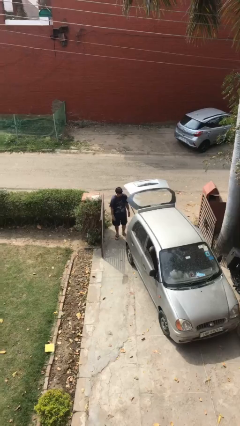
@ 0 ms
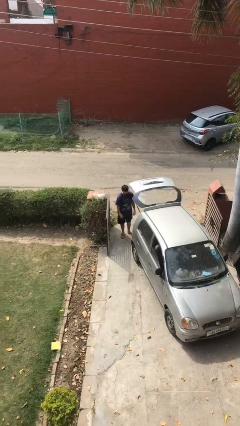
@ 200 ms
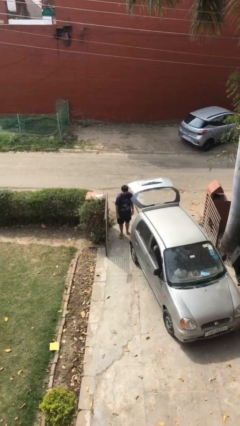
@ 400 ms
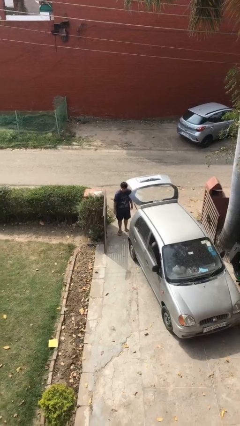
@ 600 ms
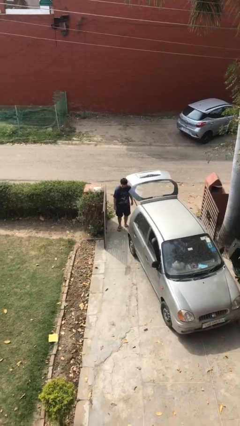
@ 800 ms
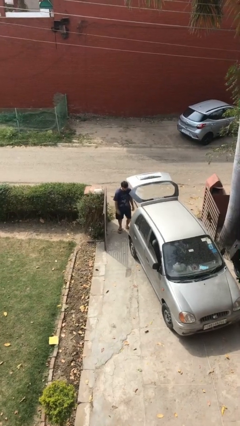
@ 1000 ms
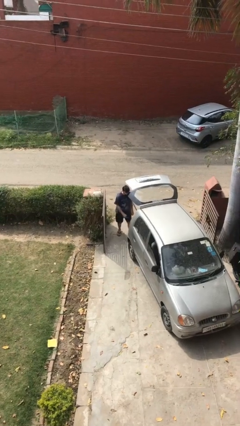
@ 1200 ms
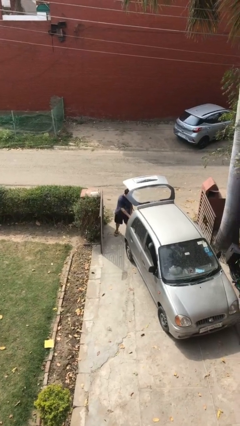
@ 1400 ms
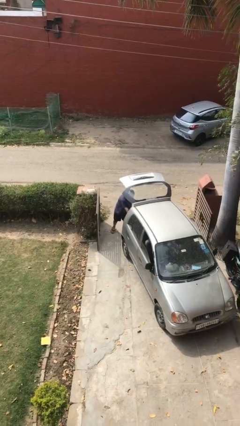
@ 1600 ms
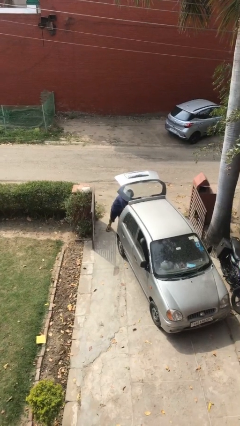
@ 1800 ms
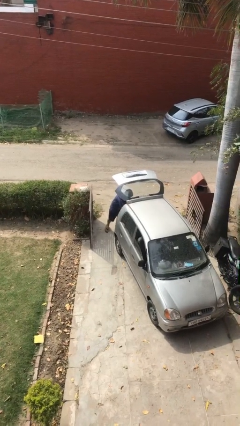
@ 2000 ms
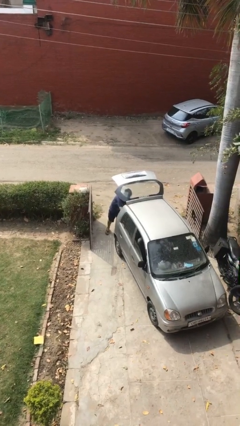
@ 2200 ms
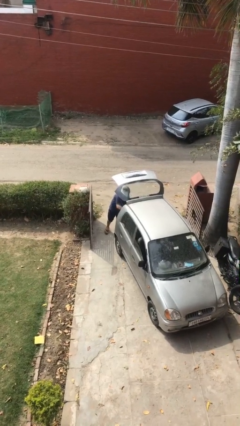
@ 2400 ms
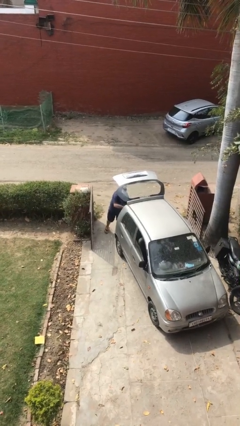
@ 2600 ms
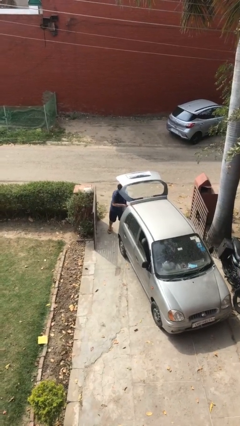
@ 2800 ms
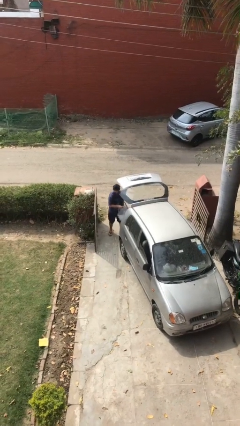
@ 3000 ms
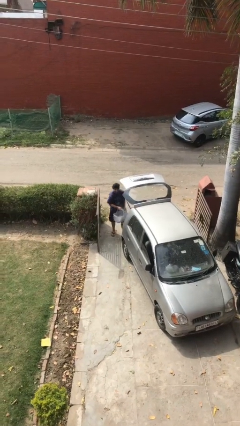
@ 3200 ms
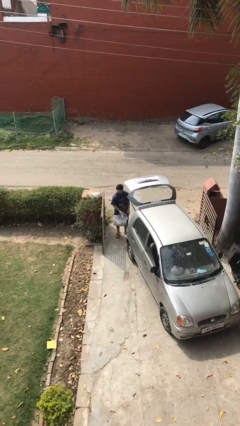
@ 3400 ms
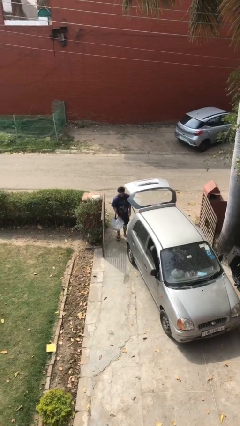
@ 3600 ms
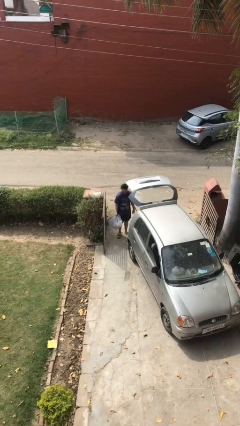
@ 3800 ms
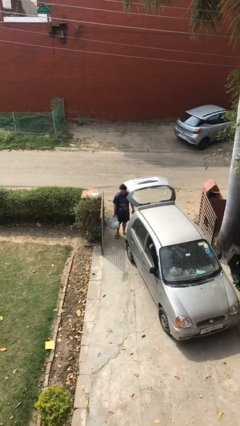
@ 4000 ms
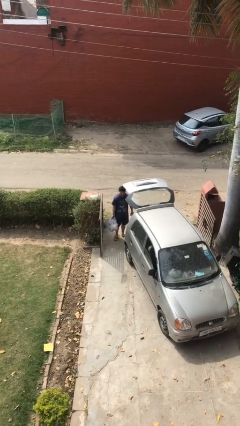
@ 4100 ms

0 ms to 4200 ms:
person unloads car

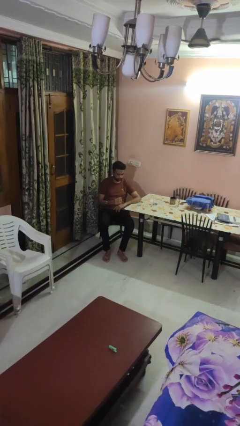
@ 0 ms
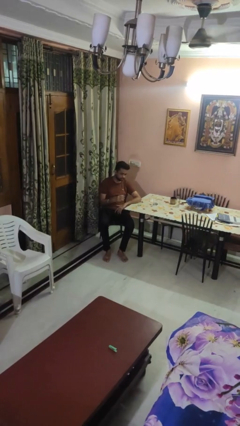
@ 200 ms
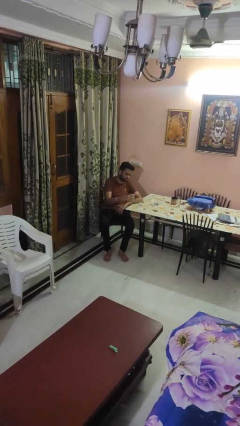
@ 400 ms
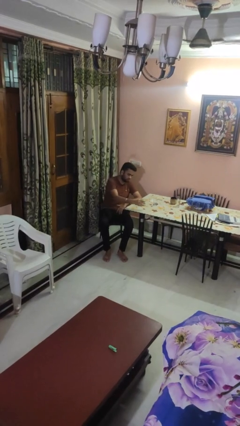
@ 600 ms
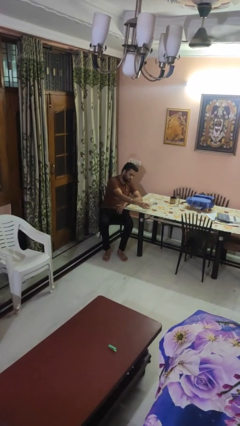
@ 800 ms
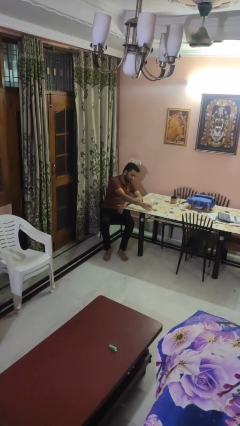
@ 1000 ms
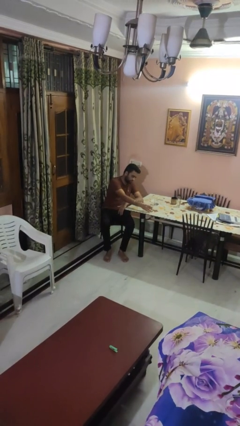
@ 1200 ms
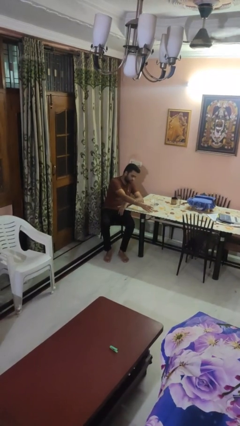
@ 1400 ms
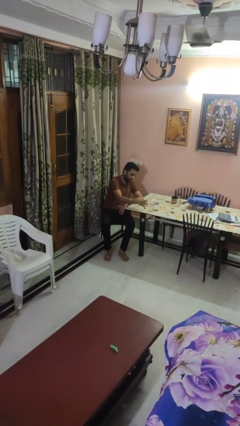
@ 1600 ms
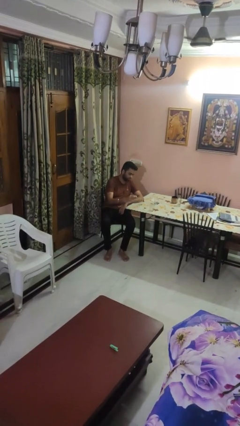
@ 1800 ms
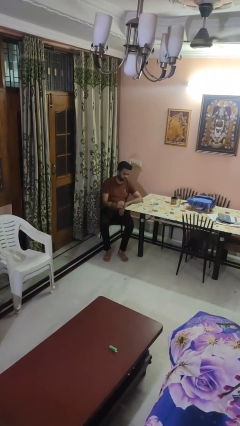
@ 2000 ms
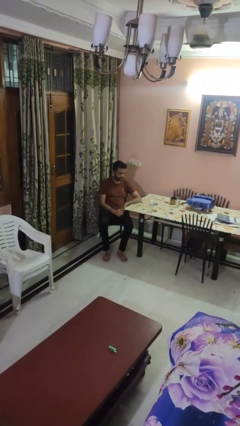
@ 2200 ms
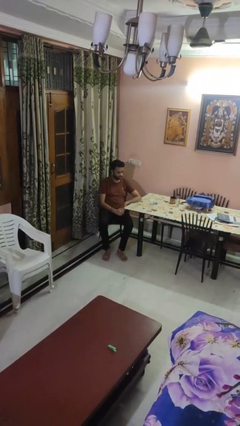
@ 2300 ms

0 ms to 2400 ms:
person puts down object on table

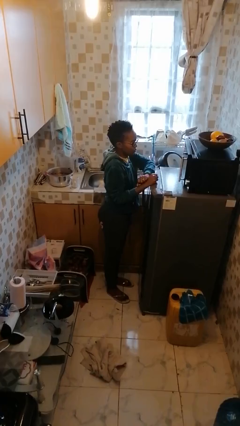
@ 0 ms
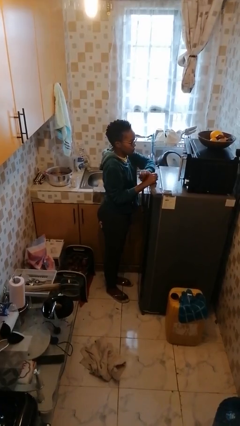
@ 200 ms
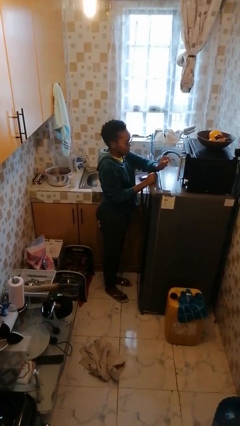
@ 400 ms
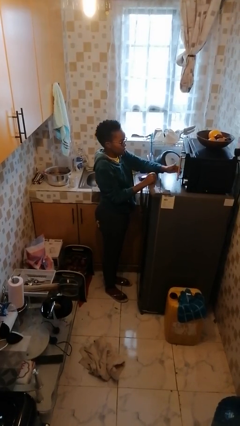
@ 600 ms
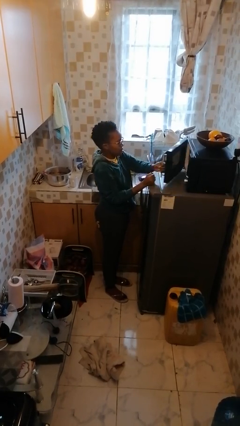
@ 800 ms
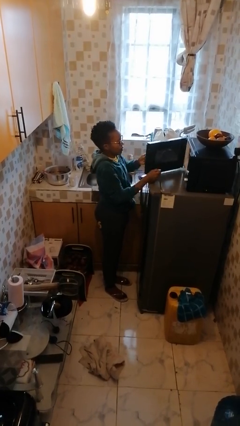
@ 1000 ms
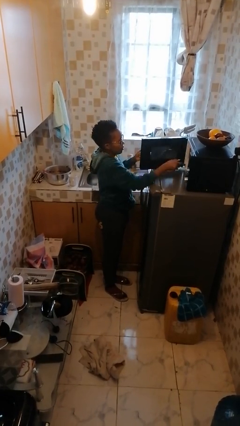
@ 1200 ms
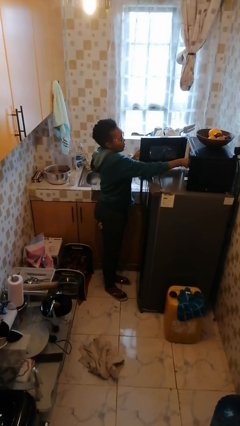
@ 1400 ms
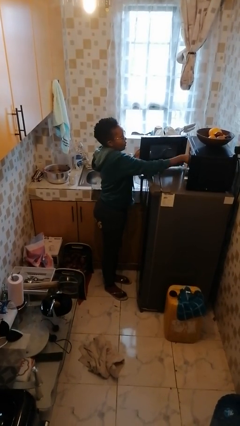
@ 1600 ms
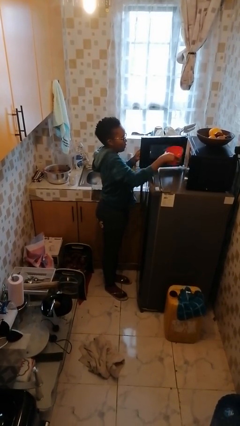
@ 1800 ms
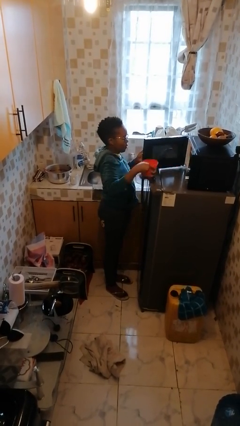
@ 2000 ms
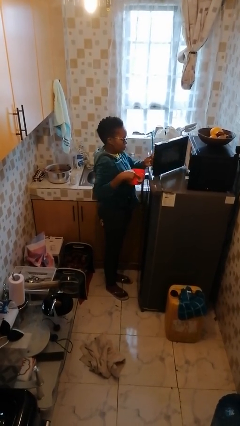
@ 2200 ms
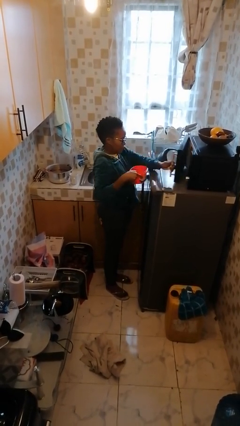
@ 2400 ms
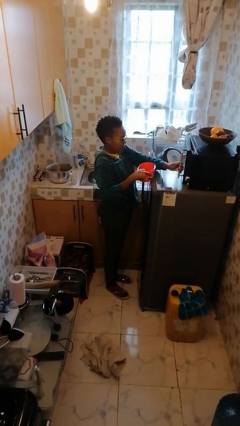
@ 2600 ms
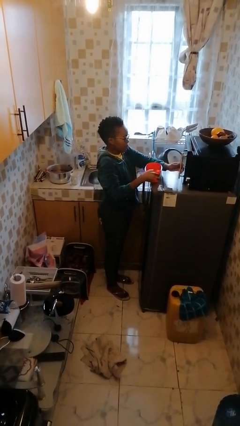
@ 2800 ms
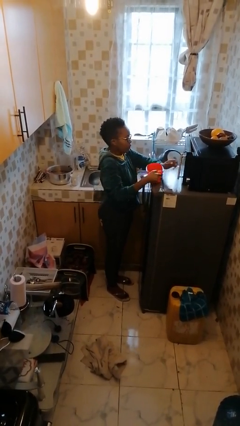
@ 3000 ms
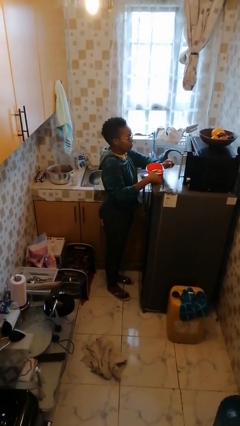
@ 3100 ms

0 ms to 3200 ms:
person takes object from microwave

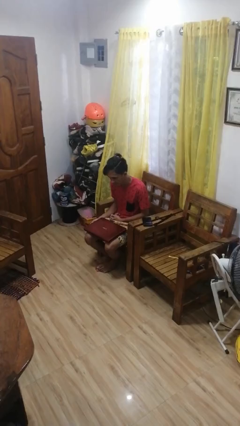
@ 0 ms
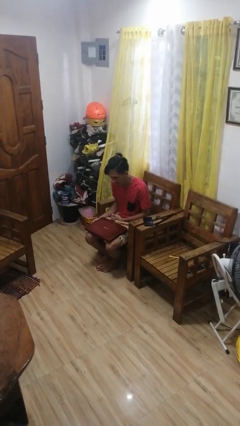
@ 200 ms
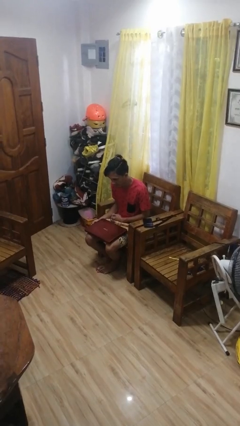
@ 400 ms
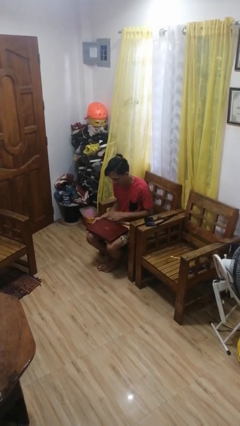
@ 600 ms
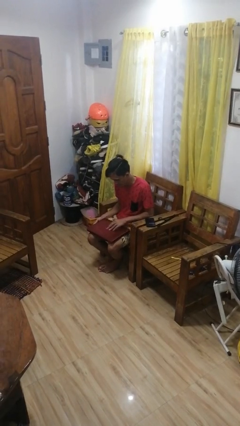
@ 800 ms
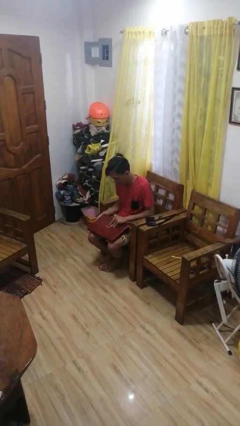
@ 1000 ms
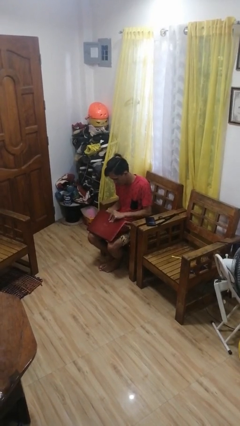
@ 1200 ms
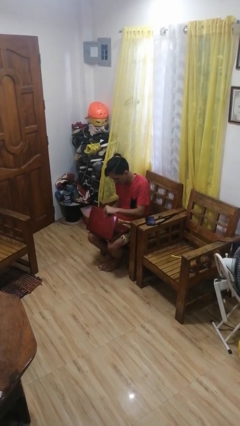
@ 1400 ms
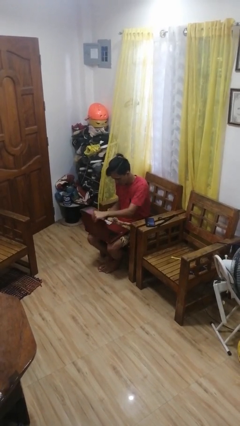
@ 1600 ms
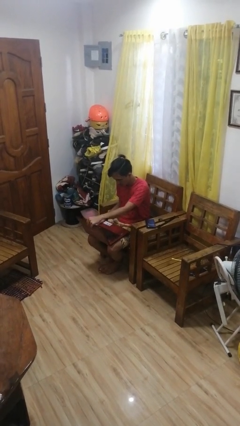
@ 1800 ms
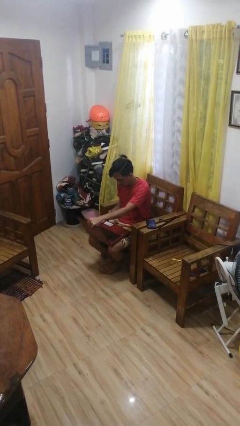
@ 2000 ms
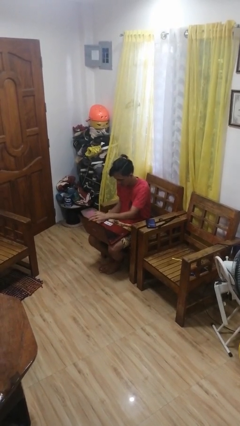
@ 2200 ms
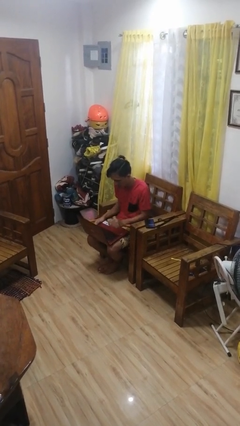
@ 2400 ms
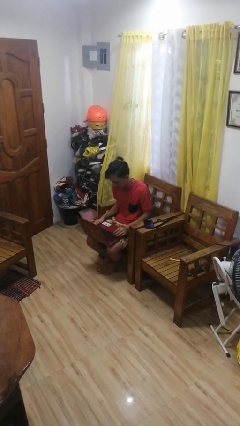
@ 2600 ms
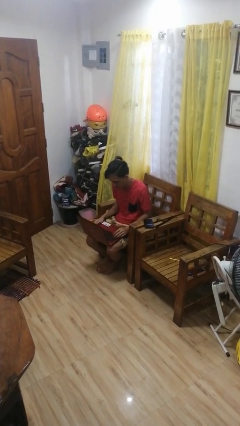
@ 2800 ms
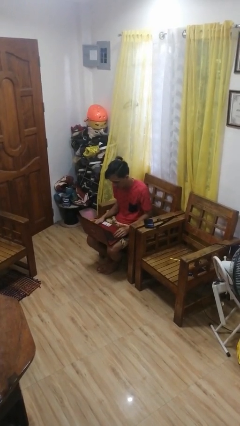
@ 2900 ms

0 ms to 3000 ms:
person opens laptop

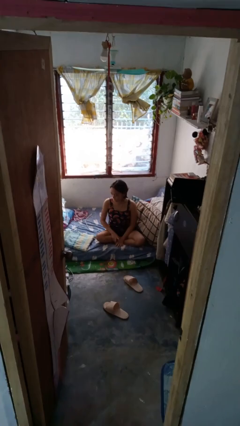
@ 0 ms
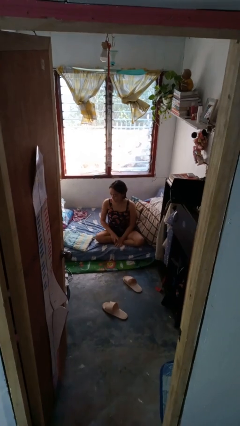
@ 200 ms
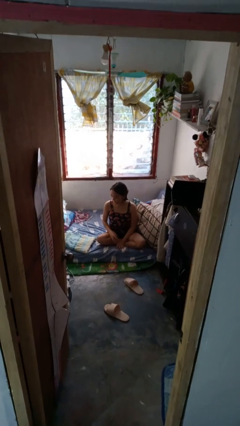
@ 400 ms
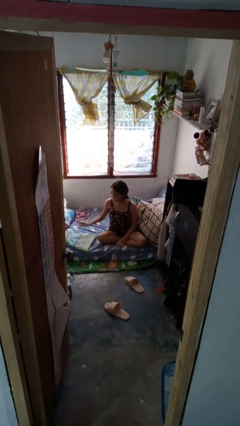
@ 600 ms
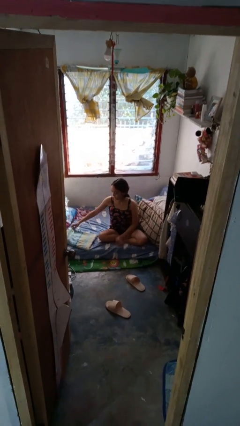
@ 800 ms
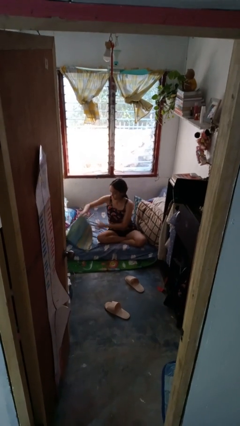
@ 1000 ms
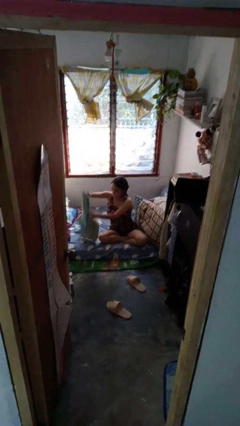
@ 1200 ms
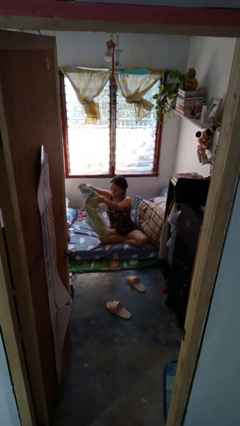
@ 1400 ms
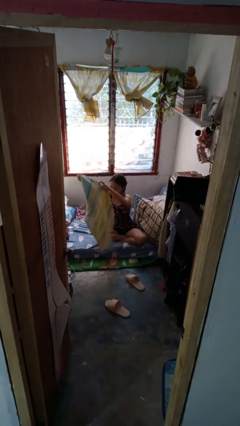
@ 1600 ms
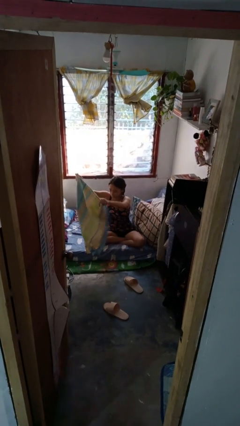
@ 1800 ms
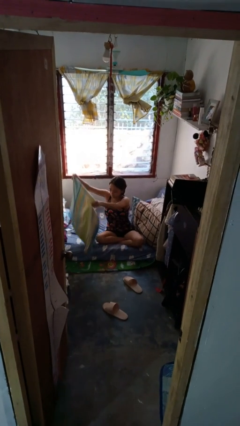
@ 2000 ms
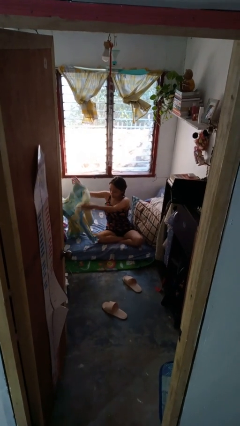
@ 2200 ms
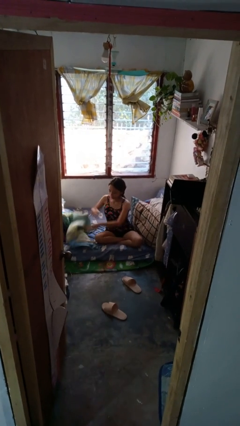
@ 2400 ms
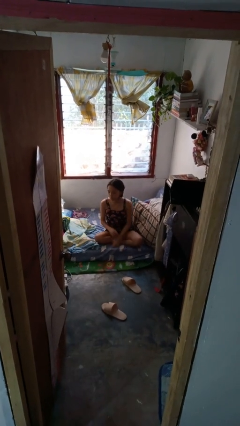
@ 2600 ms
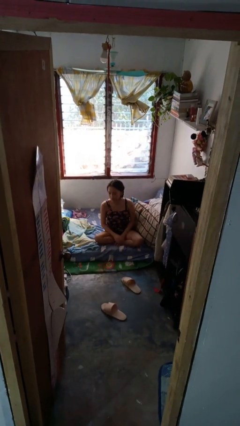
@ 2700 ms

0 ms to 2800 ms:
person unfolds blanket

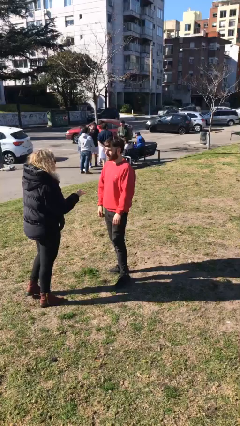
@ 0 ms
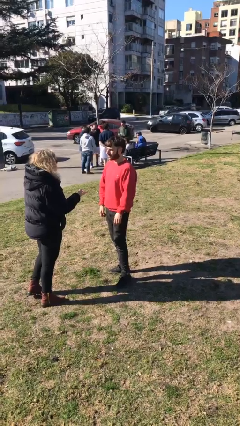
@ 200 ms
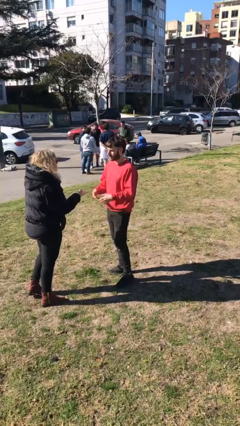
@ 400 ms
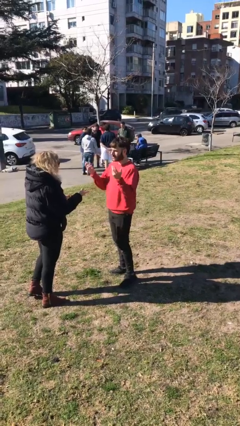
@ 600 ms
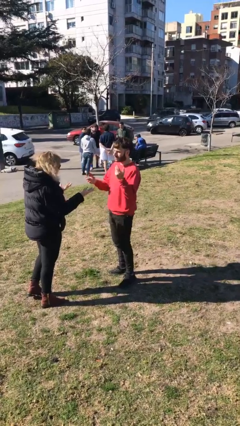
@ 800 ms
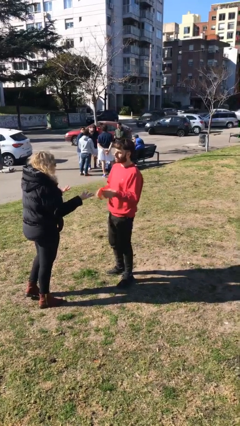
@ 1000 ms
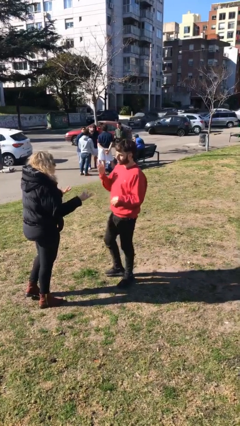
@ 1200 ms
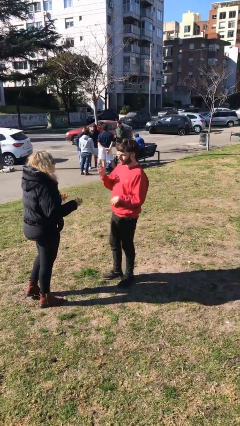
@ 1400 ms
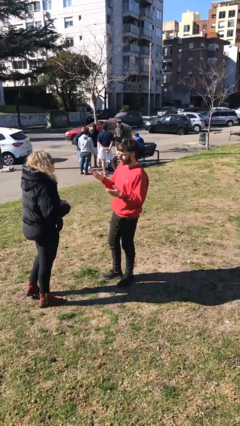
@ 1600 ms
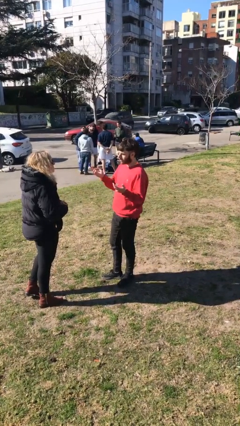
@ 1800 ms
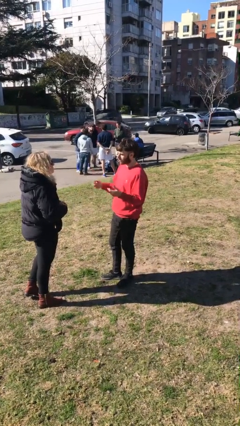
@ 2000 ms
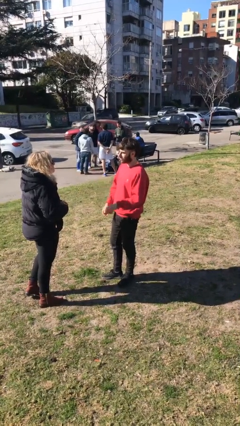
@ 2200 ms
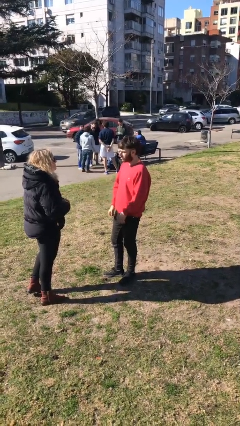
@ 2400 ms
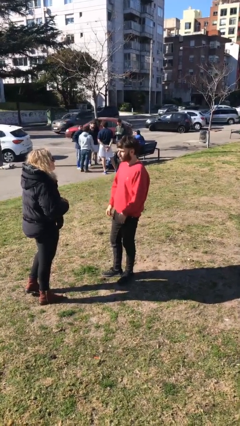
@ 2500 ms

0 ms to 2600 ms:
person talks to person
